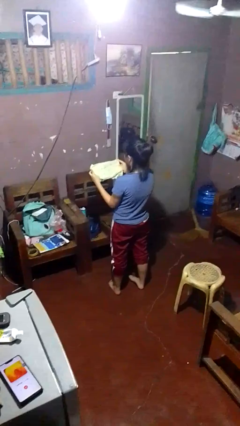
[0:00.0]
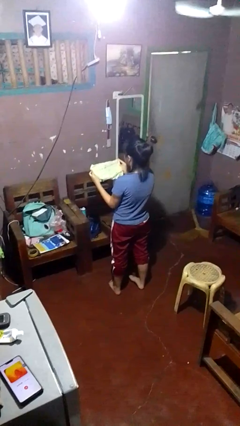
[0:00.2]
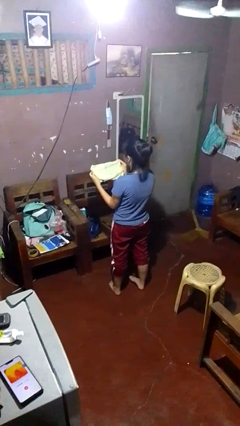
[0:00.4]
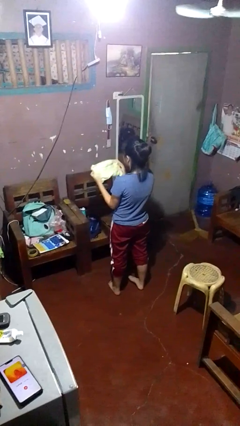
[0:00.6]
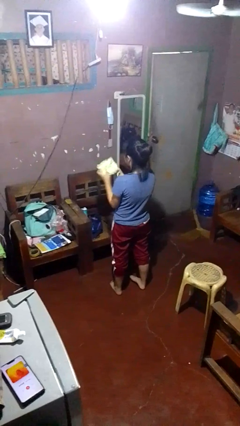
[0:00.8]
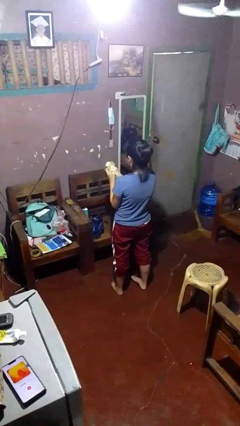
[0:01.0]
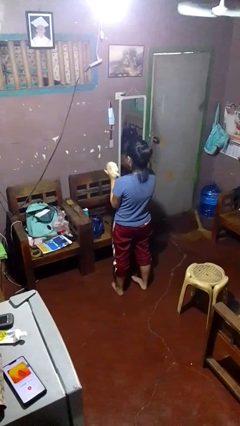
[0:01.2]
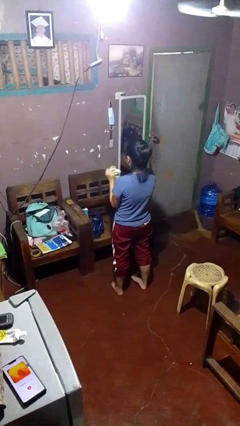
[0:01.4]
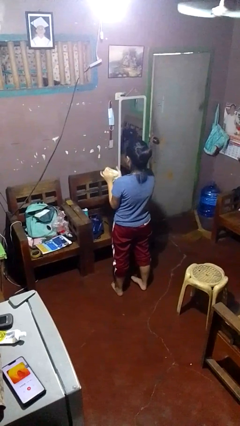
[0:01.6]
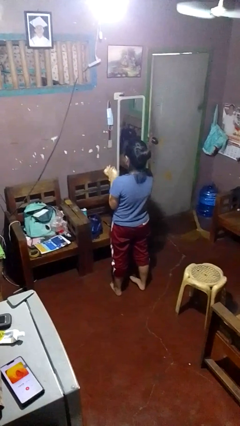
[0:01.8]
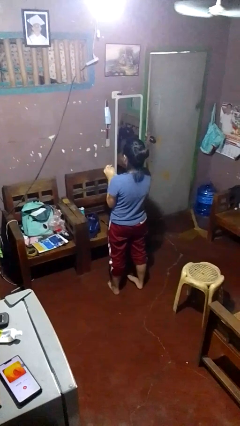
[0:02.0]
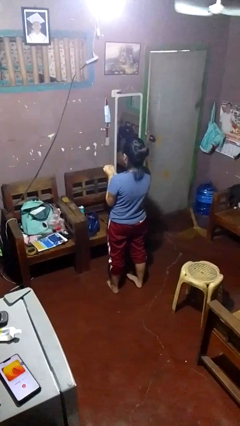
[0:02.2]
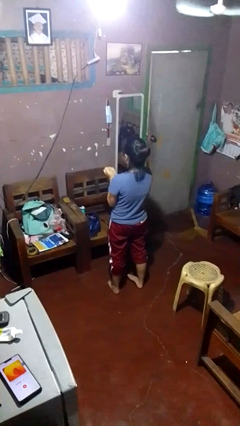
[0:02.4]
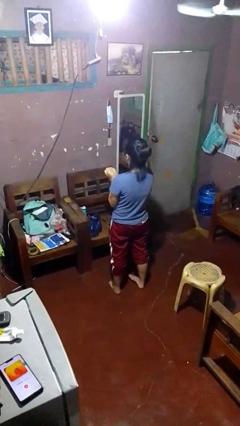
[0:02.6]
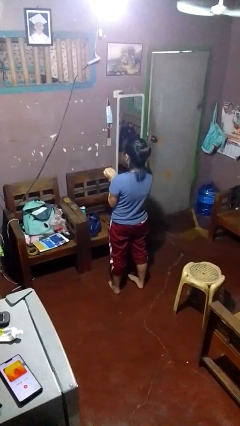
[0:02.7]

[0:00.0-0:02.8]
person crumples paper

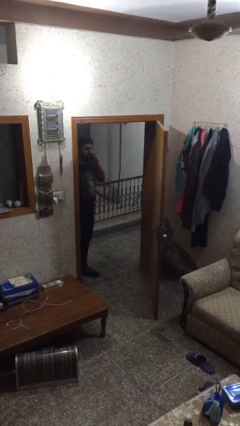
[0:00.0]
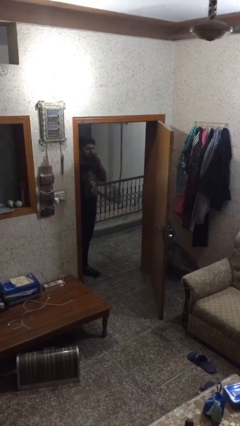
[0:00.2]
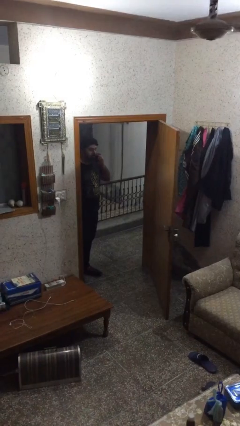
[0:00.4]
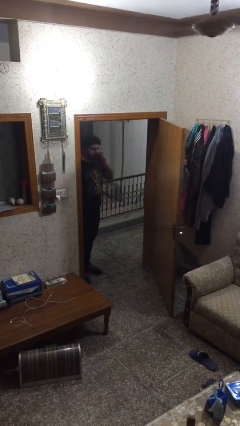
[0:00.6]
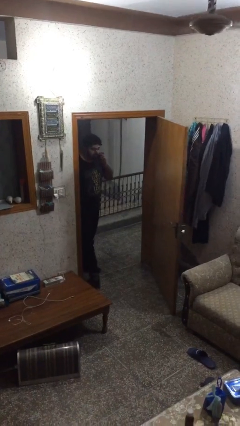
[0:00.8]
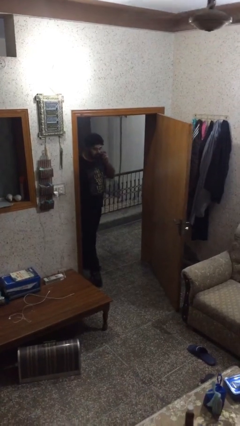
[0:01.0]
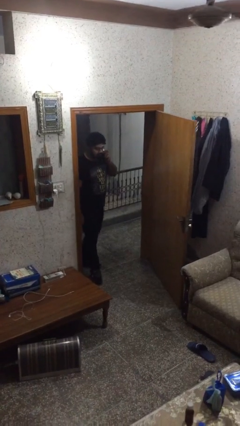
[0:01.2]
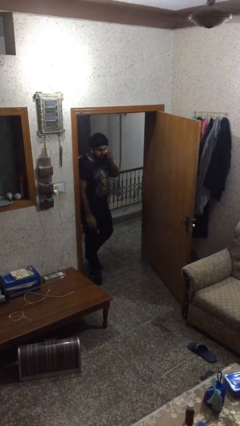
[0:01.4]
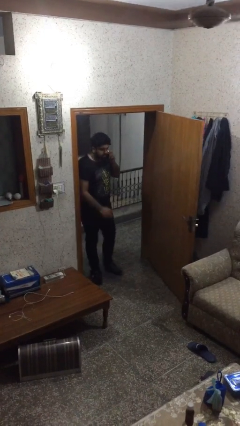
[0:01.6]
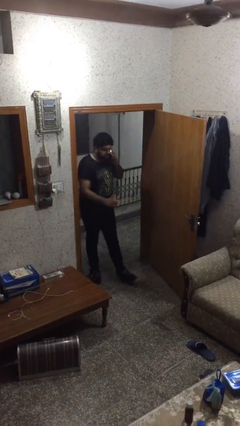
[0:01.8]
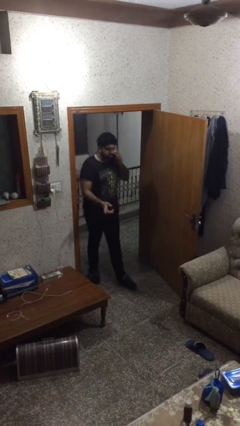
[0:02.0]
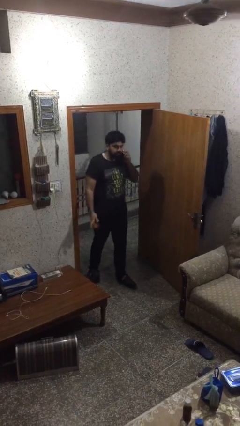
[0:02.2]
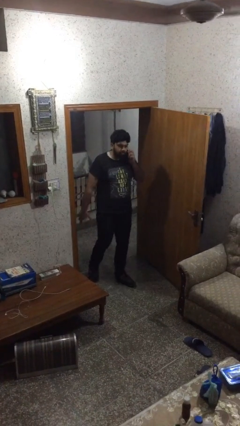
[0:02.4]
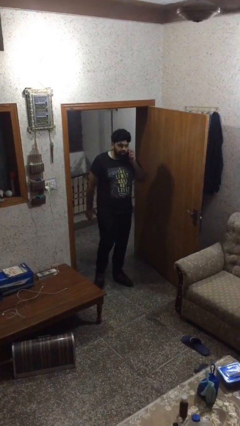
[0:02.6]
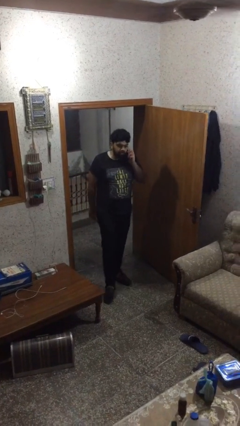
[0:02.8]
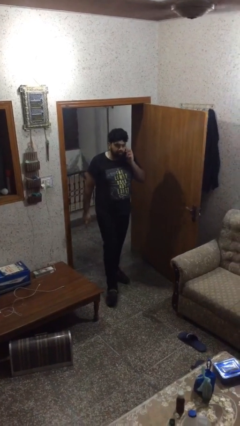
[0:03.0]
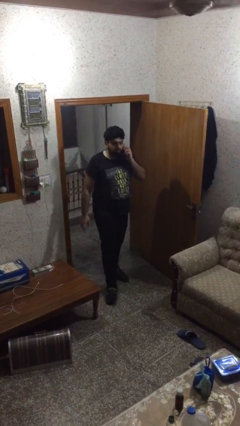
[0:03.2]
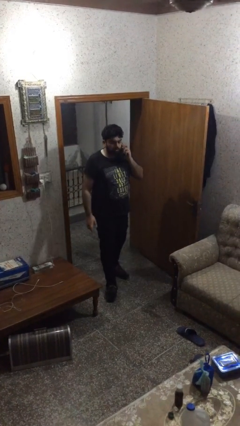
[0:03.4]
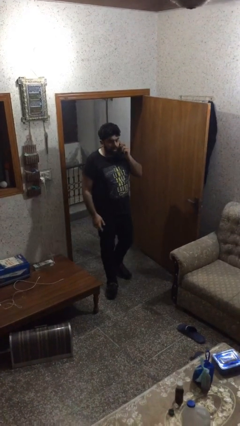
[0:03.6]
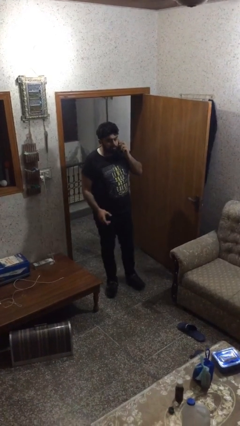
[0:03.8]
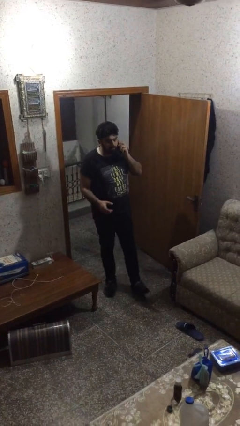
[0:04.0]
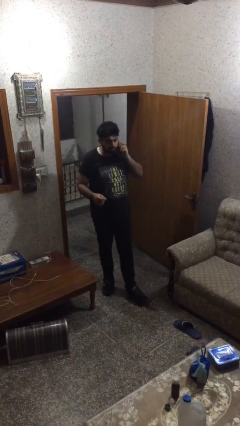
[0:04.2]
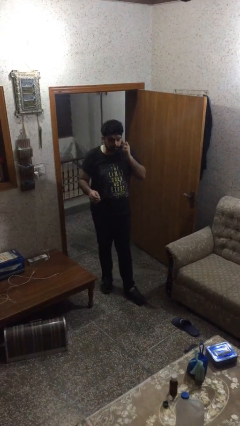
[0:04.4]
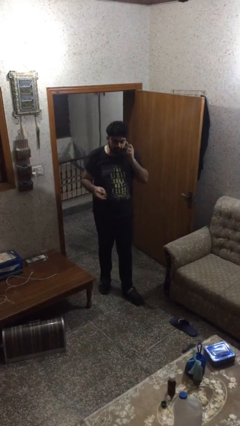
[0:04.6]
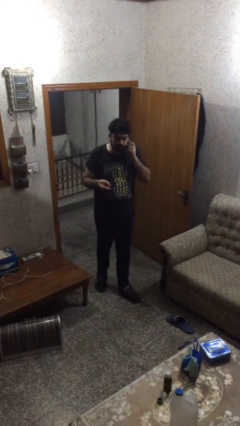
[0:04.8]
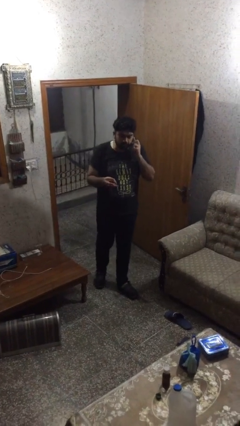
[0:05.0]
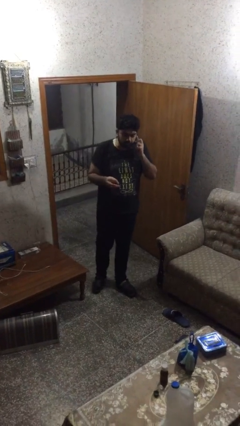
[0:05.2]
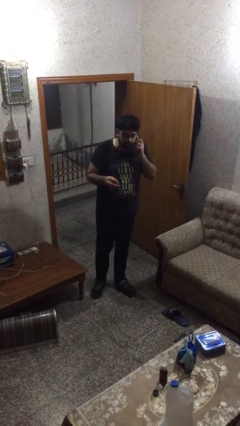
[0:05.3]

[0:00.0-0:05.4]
person enters scene through structure

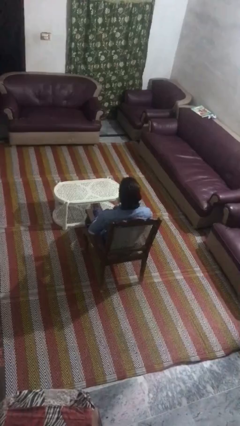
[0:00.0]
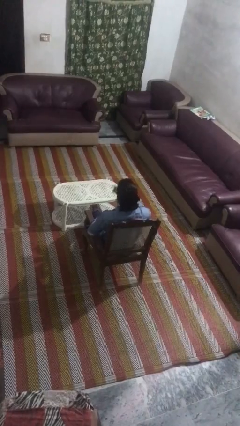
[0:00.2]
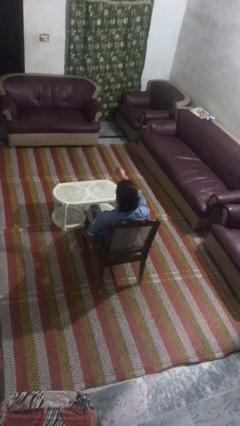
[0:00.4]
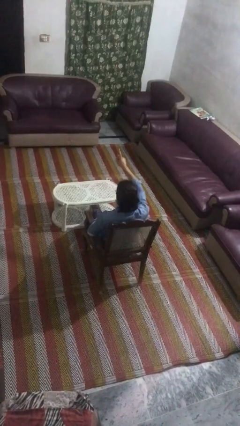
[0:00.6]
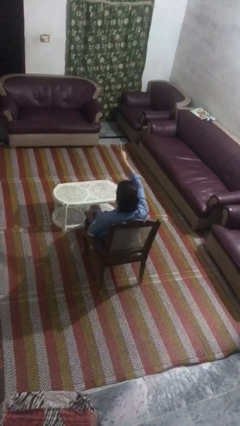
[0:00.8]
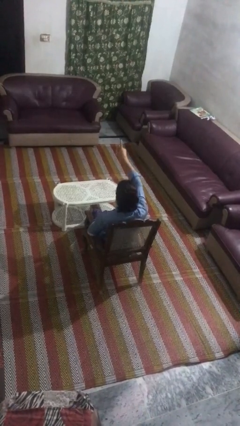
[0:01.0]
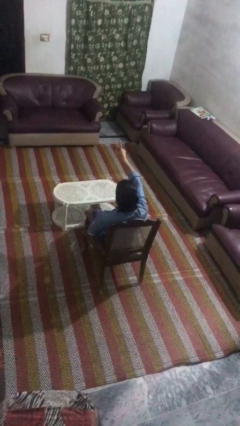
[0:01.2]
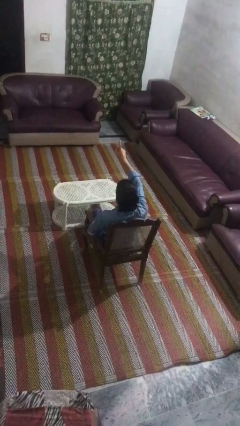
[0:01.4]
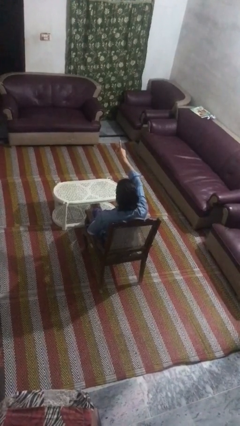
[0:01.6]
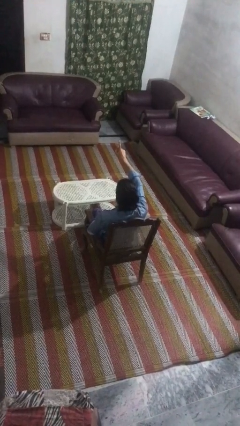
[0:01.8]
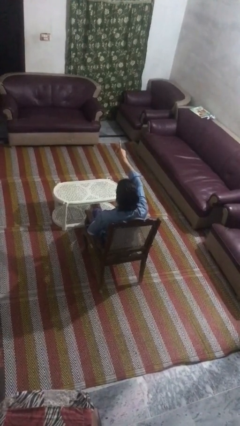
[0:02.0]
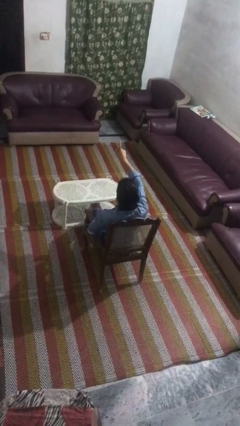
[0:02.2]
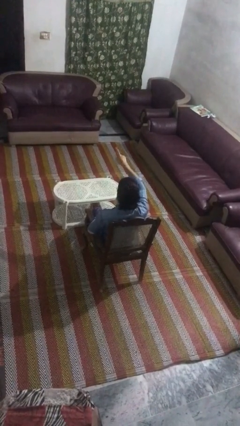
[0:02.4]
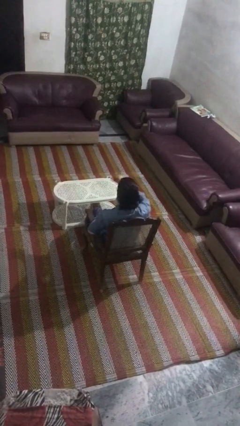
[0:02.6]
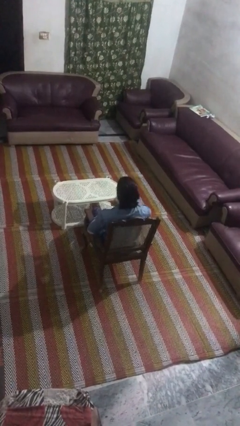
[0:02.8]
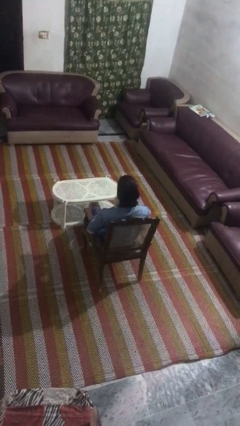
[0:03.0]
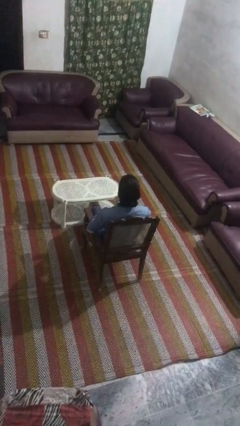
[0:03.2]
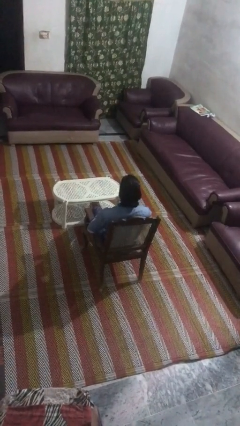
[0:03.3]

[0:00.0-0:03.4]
person gestures number one

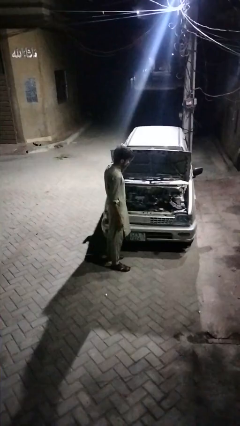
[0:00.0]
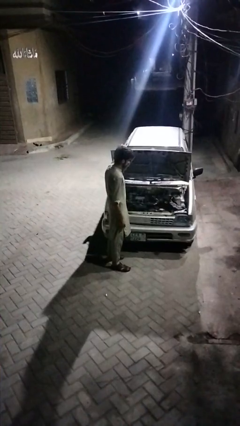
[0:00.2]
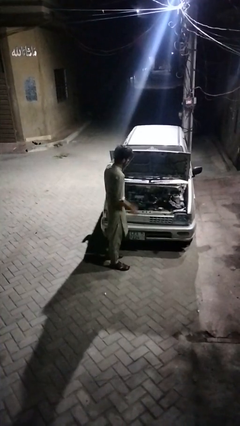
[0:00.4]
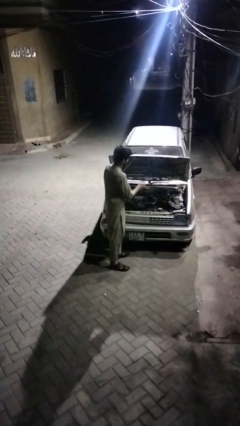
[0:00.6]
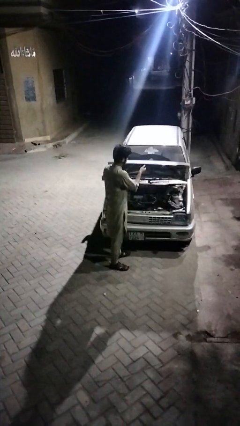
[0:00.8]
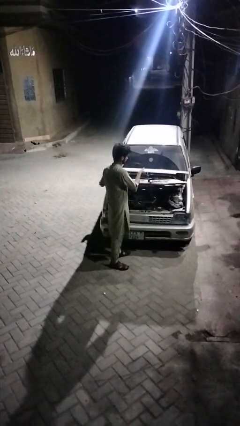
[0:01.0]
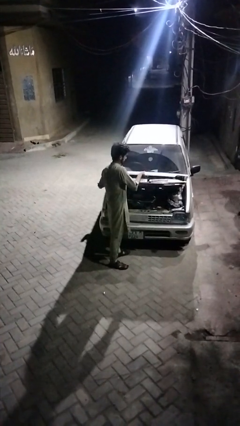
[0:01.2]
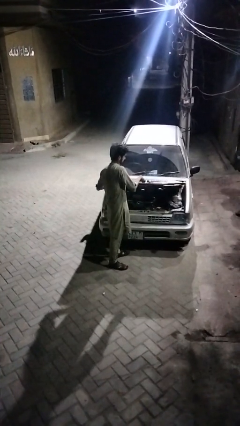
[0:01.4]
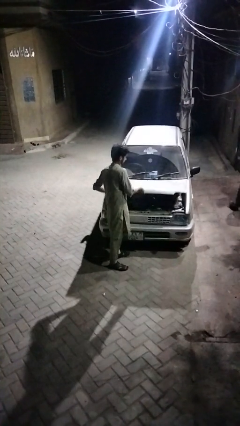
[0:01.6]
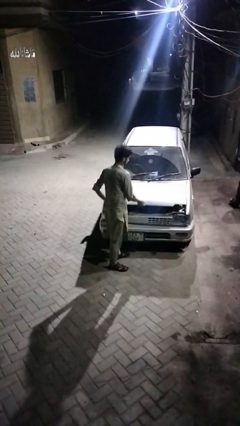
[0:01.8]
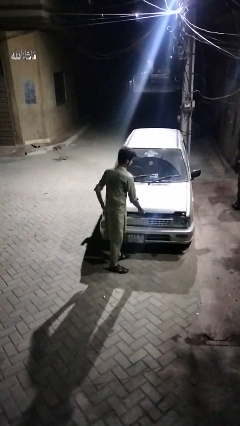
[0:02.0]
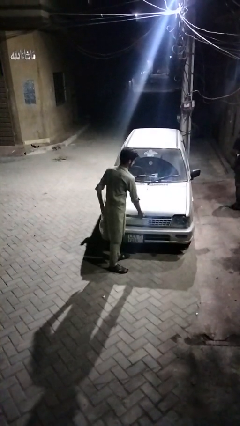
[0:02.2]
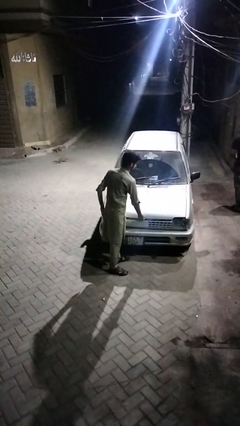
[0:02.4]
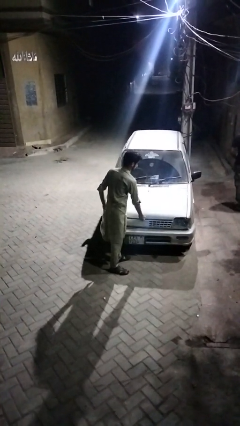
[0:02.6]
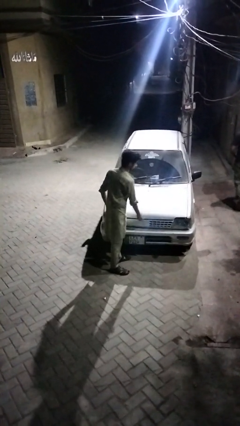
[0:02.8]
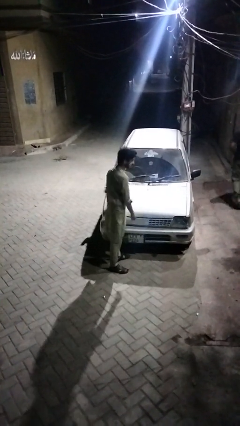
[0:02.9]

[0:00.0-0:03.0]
person closes car hood

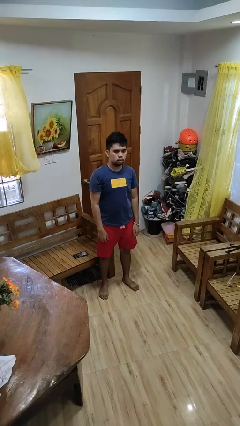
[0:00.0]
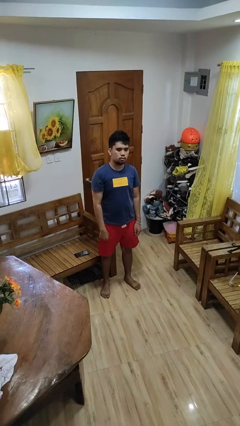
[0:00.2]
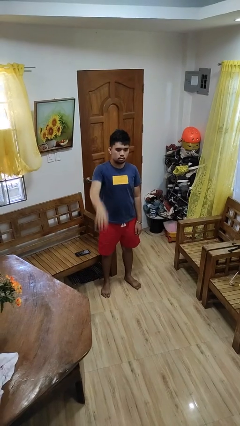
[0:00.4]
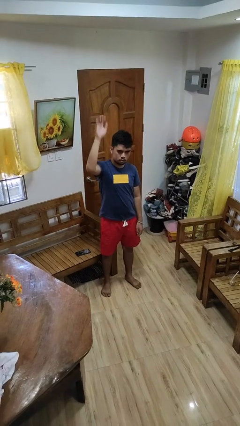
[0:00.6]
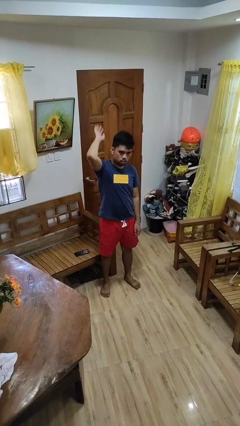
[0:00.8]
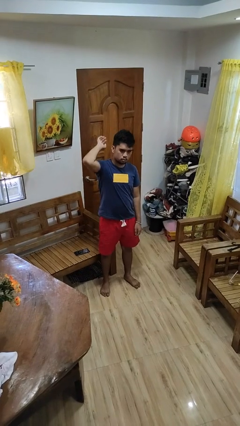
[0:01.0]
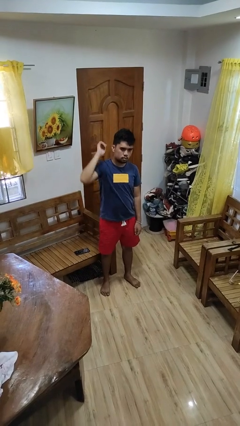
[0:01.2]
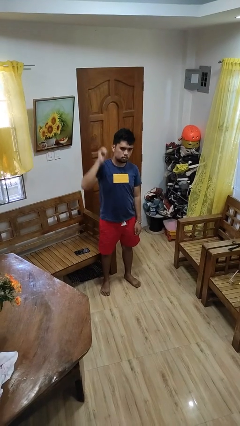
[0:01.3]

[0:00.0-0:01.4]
person gestures swipe up

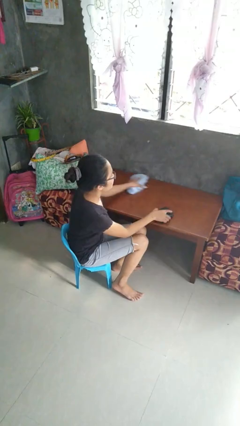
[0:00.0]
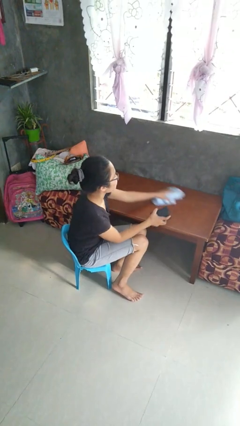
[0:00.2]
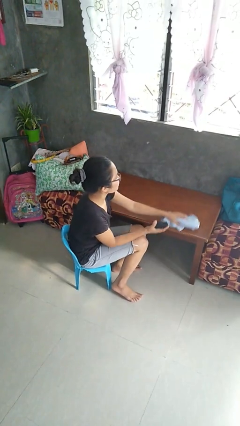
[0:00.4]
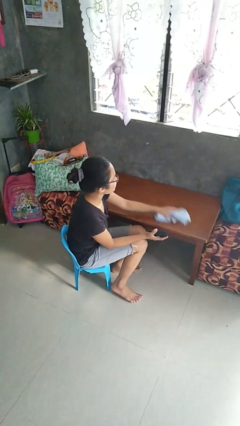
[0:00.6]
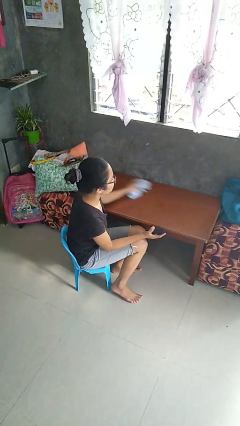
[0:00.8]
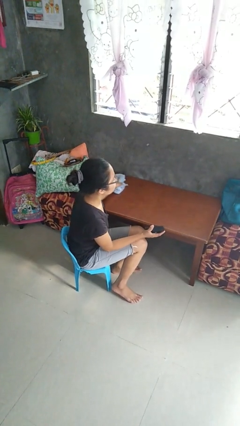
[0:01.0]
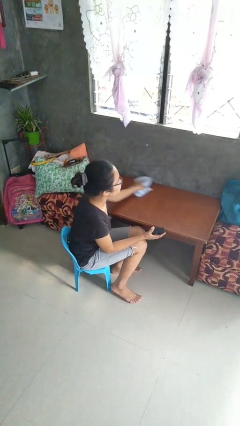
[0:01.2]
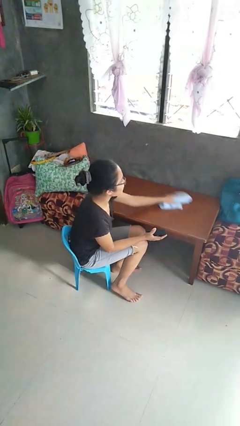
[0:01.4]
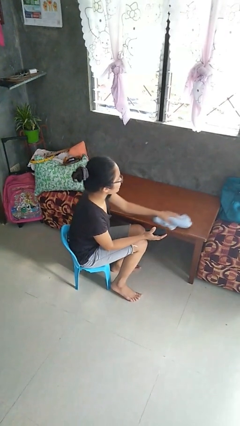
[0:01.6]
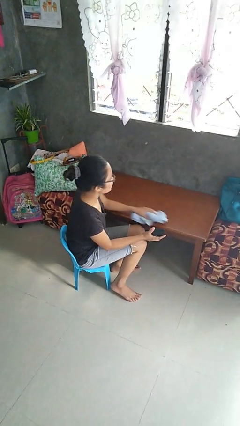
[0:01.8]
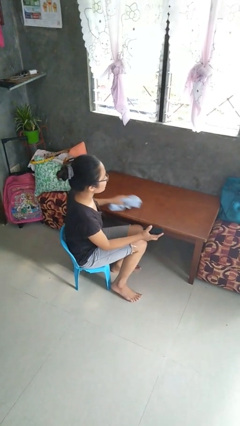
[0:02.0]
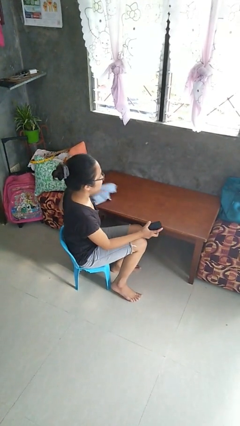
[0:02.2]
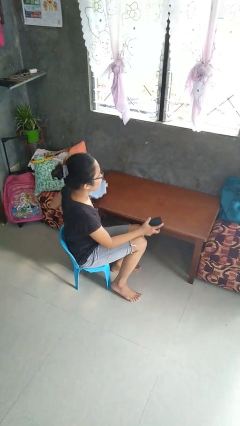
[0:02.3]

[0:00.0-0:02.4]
person cleans table with rag
